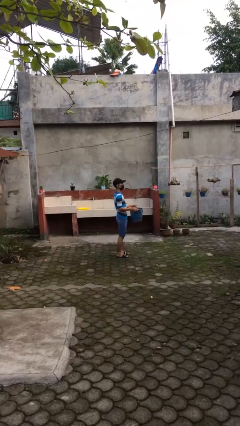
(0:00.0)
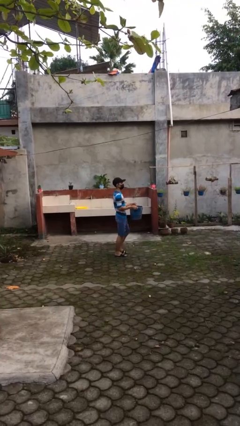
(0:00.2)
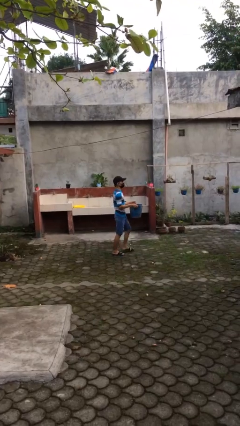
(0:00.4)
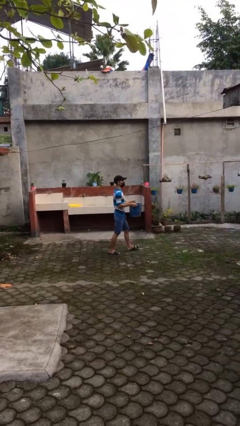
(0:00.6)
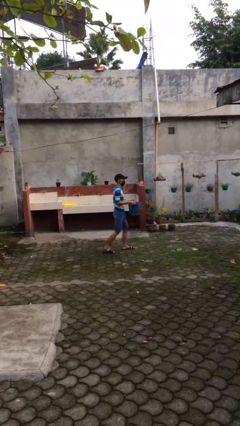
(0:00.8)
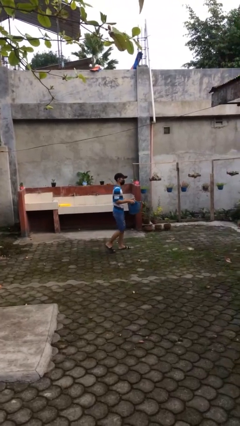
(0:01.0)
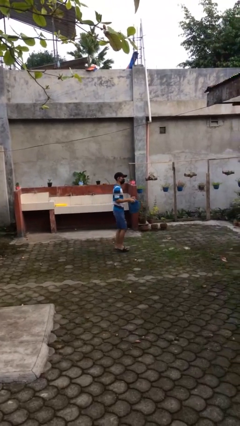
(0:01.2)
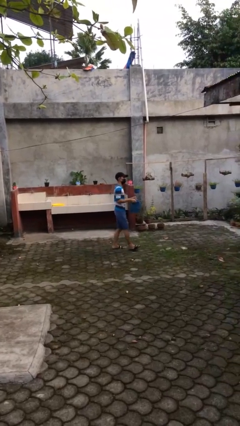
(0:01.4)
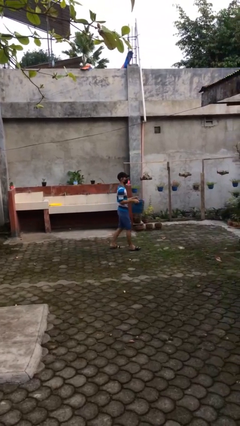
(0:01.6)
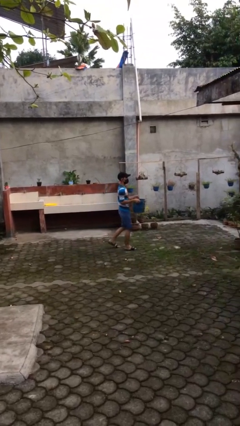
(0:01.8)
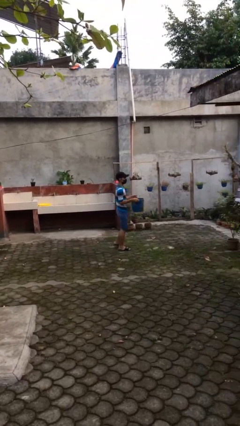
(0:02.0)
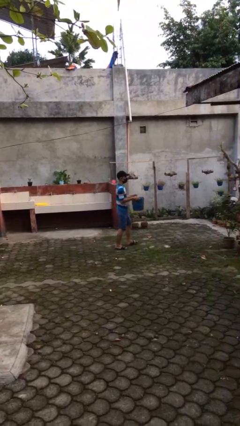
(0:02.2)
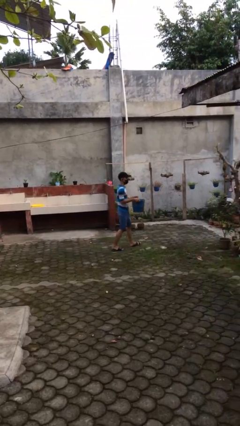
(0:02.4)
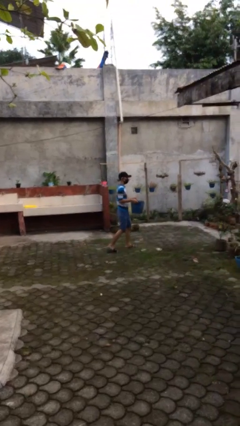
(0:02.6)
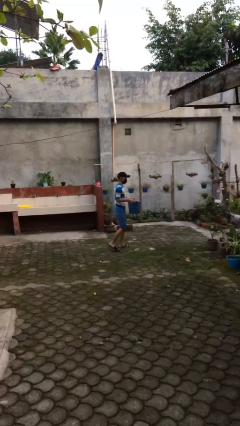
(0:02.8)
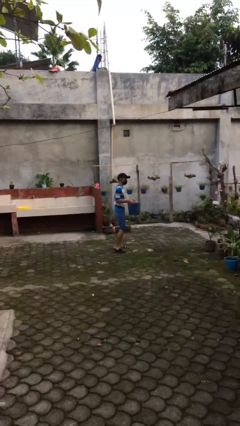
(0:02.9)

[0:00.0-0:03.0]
person carries heavy object

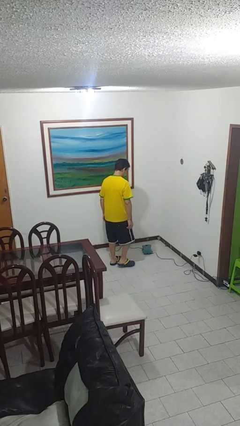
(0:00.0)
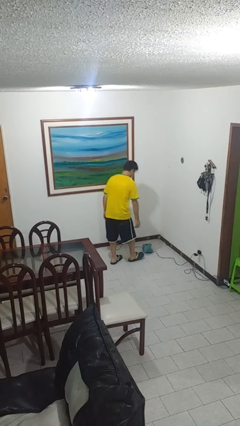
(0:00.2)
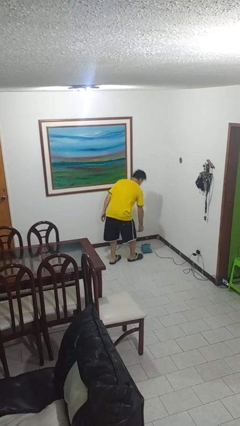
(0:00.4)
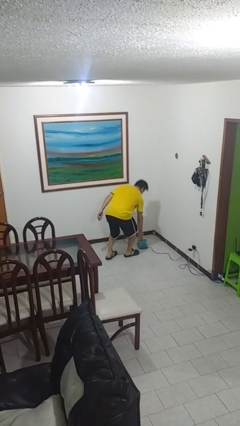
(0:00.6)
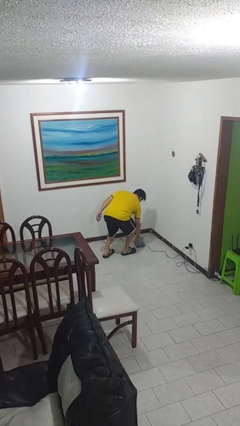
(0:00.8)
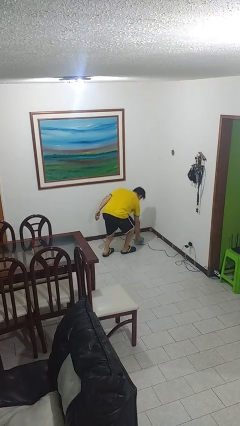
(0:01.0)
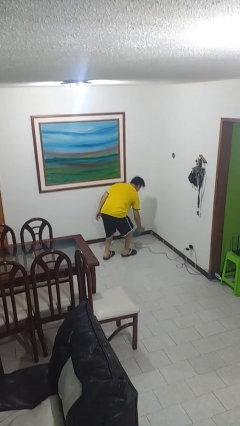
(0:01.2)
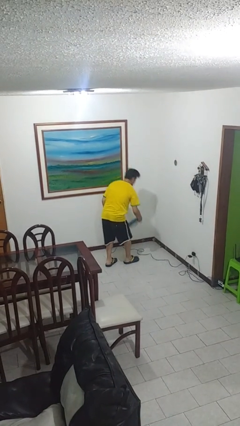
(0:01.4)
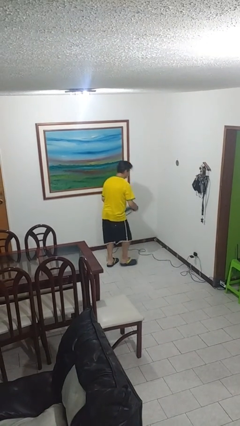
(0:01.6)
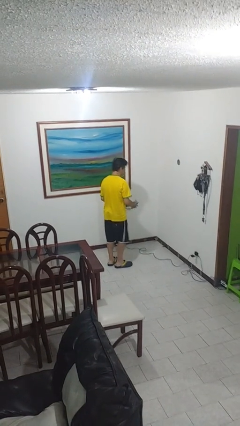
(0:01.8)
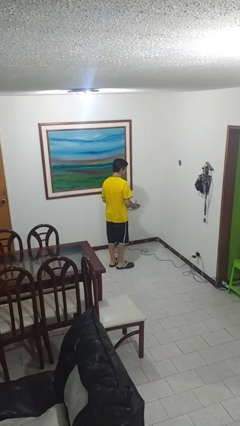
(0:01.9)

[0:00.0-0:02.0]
person picks up object from floor

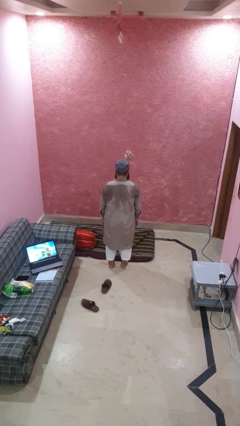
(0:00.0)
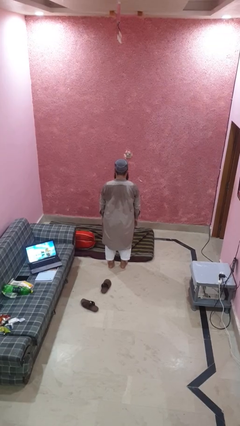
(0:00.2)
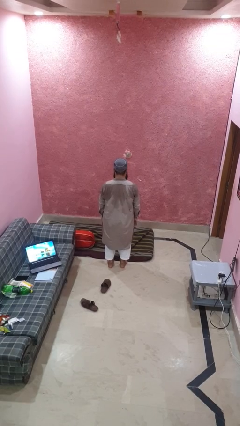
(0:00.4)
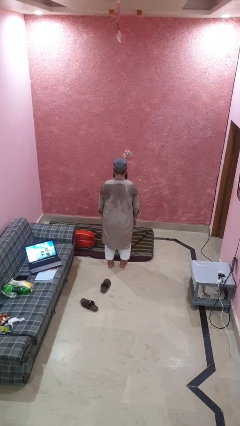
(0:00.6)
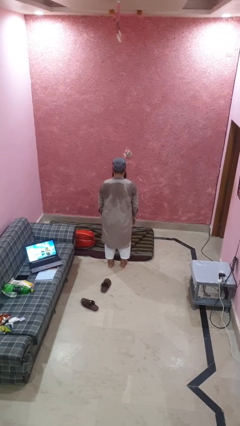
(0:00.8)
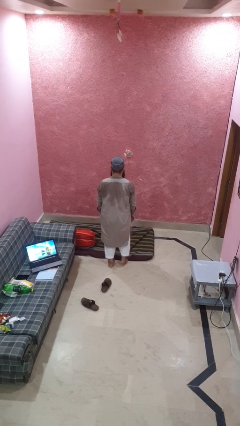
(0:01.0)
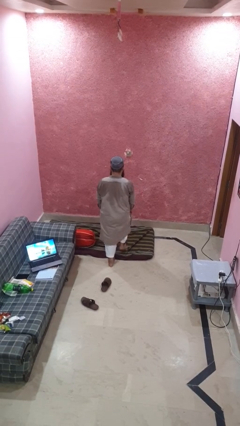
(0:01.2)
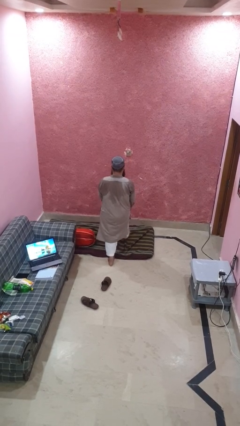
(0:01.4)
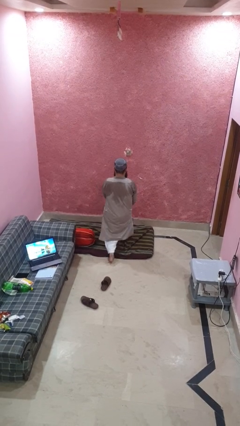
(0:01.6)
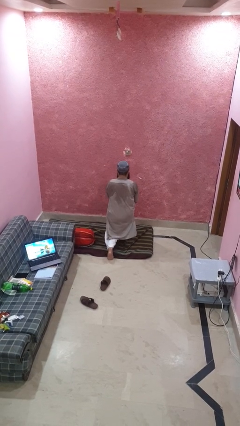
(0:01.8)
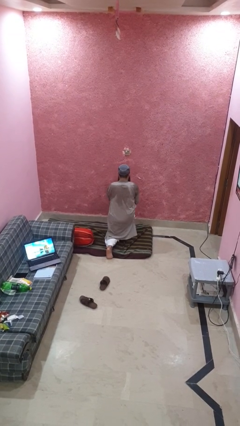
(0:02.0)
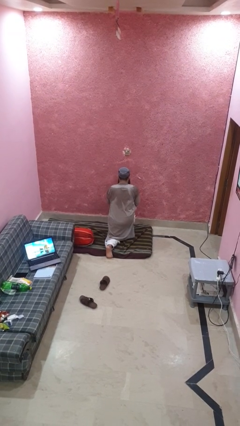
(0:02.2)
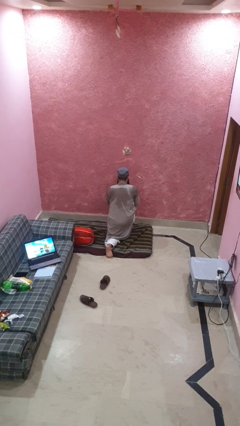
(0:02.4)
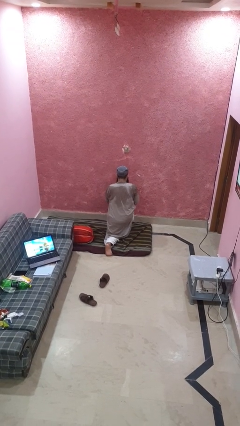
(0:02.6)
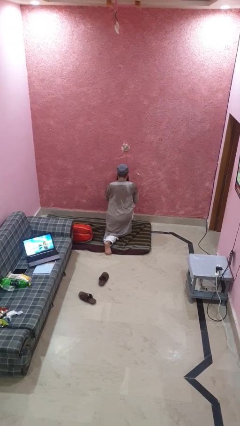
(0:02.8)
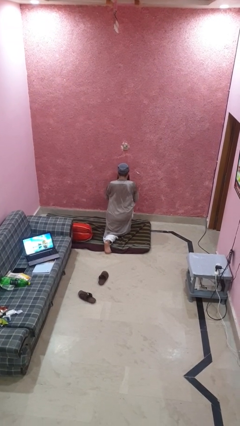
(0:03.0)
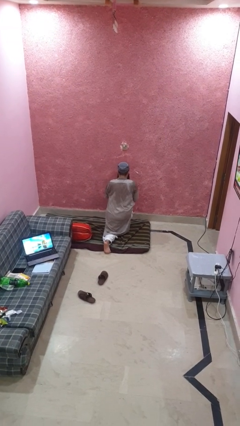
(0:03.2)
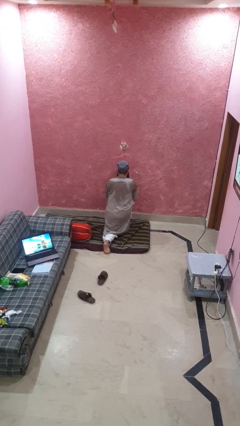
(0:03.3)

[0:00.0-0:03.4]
person exercises with lunges

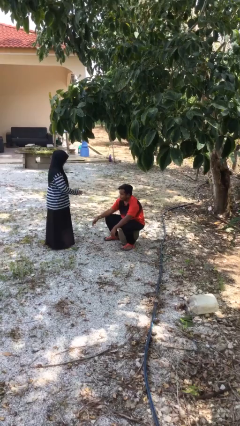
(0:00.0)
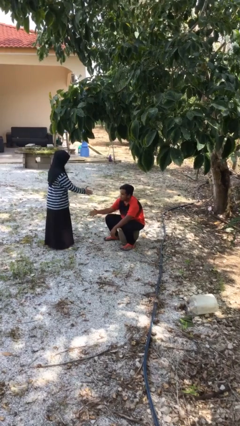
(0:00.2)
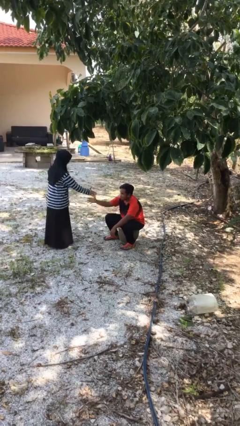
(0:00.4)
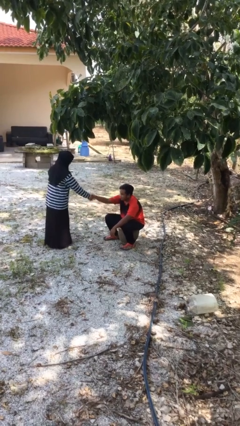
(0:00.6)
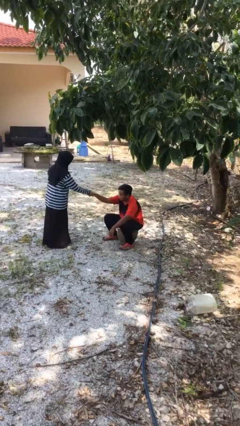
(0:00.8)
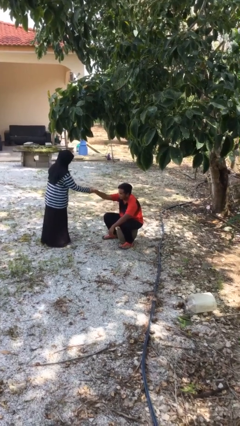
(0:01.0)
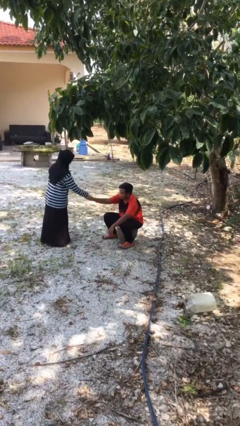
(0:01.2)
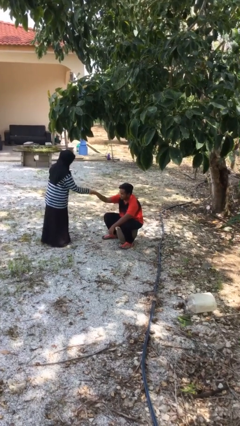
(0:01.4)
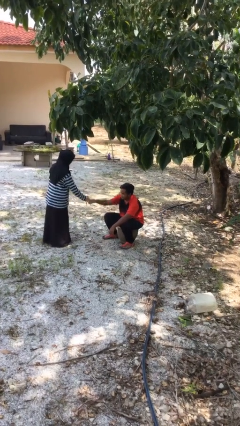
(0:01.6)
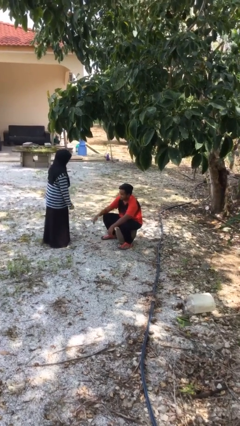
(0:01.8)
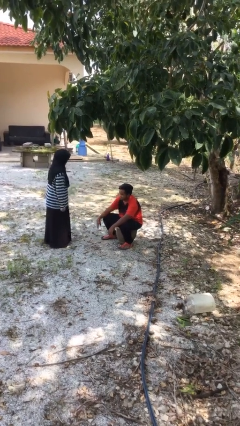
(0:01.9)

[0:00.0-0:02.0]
person shakes hand

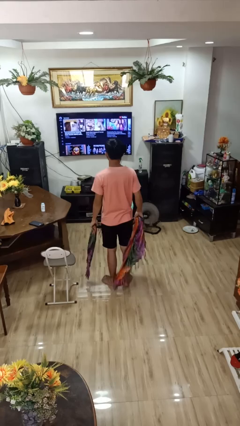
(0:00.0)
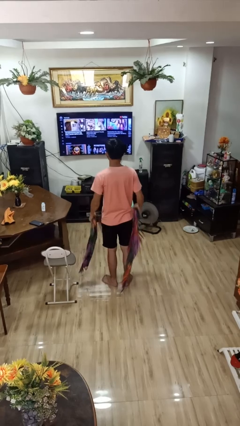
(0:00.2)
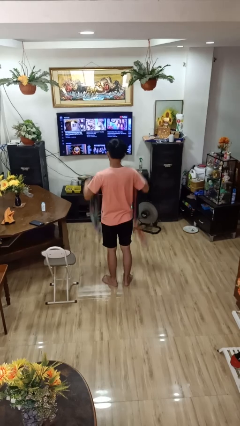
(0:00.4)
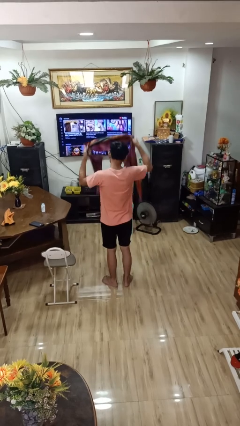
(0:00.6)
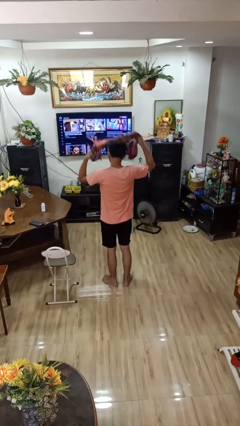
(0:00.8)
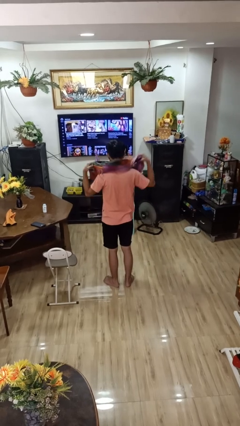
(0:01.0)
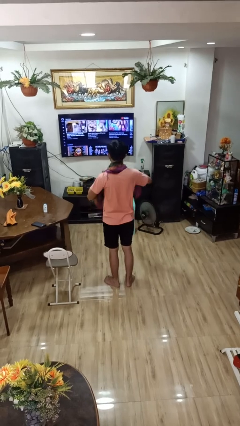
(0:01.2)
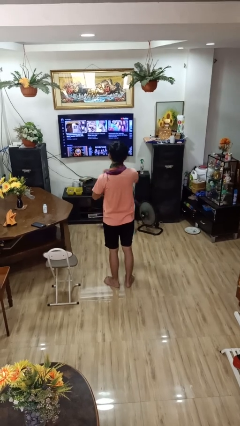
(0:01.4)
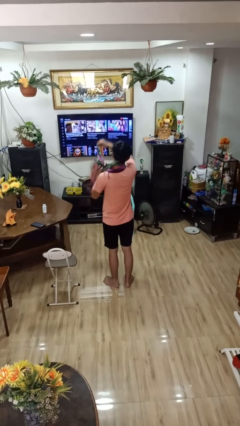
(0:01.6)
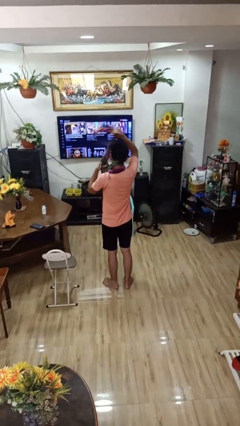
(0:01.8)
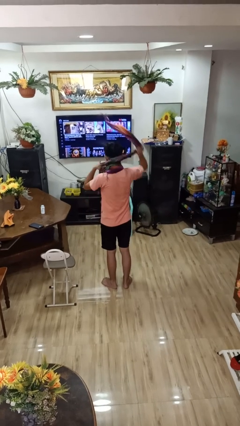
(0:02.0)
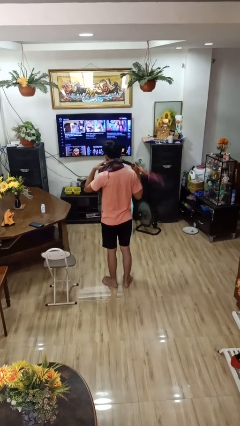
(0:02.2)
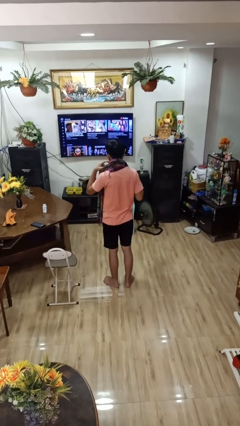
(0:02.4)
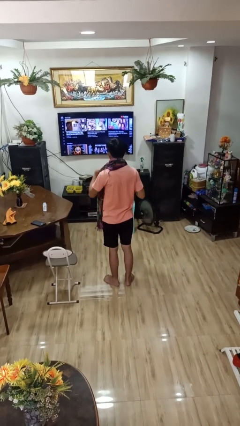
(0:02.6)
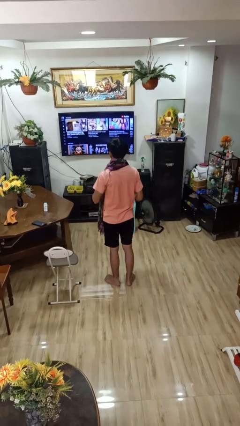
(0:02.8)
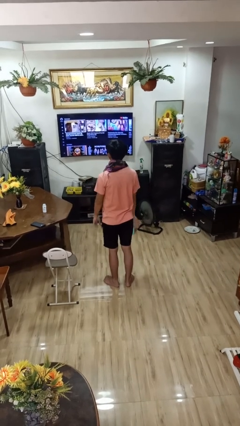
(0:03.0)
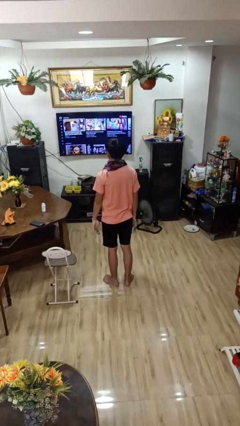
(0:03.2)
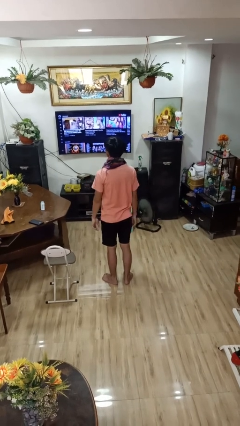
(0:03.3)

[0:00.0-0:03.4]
person puts on scarf

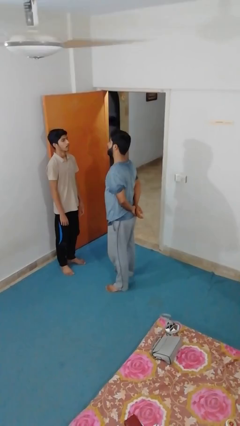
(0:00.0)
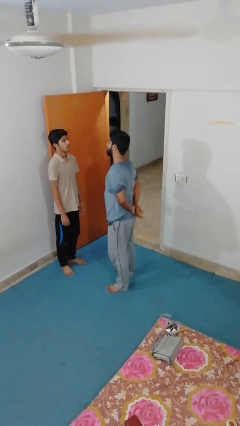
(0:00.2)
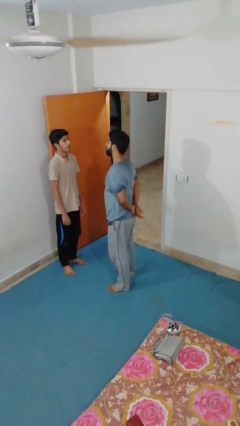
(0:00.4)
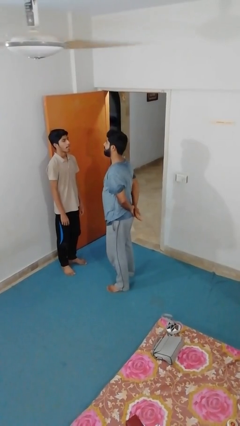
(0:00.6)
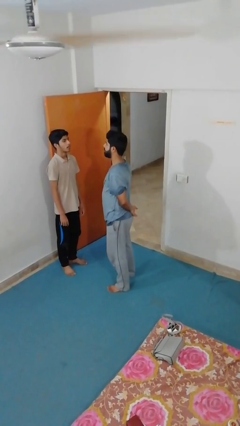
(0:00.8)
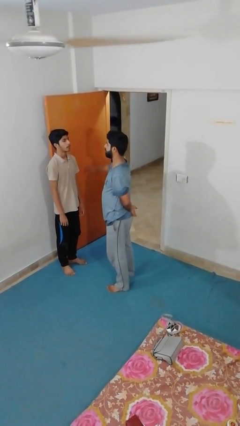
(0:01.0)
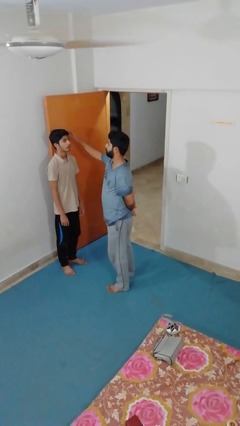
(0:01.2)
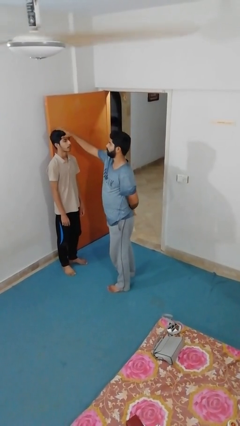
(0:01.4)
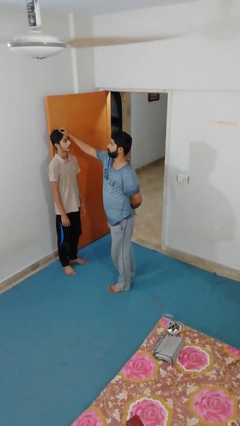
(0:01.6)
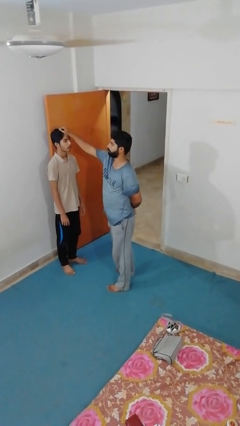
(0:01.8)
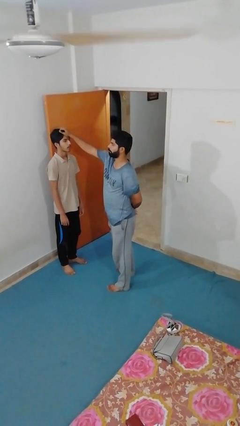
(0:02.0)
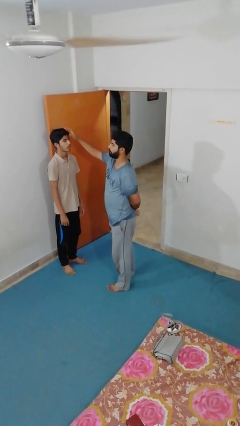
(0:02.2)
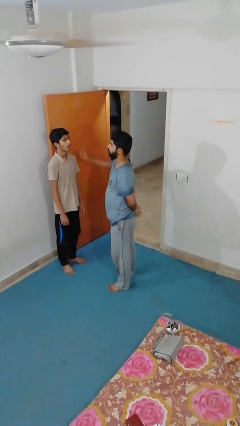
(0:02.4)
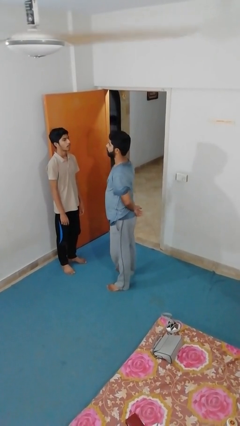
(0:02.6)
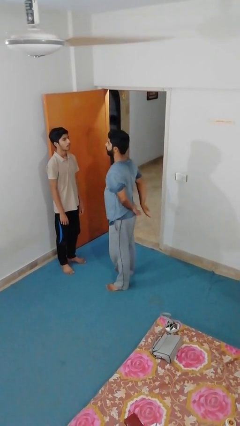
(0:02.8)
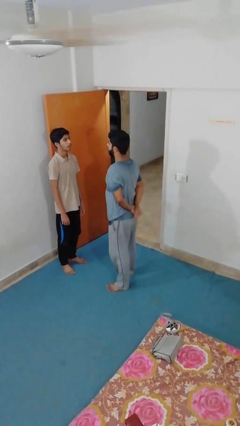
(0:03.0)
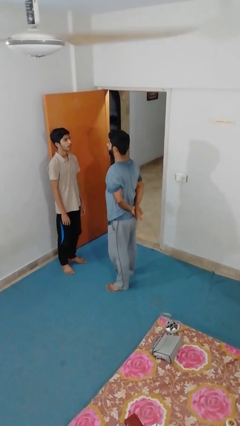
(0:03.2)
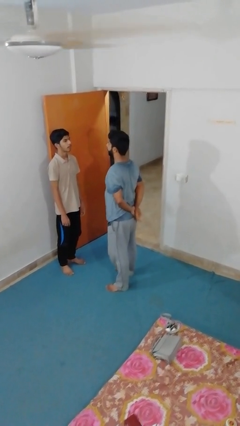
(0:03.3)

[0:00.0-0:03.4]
person grabs person by hair

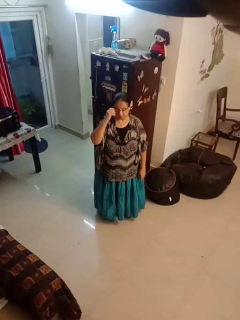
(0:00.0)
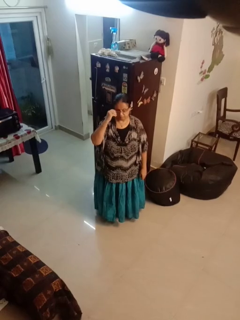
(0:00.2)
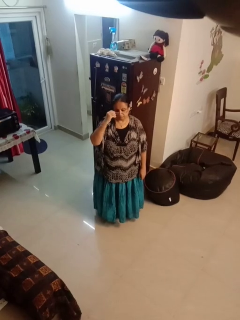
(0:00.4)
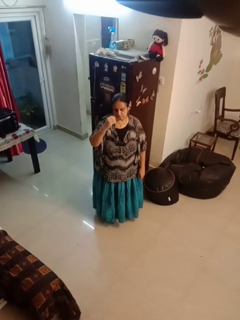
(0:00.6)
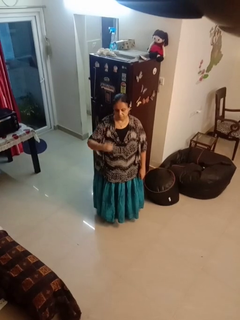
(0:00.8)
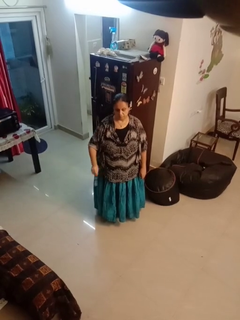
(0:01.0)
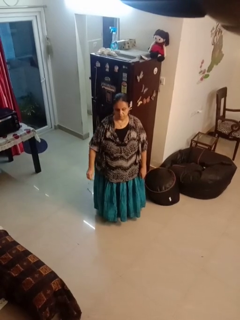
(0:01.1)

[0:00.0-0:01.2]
person takes off glasses
